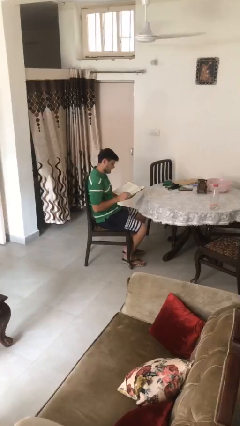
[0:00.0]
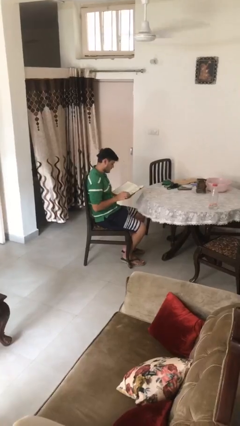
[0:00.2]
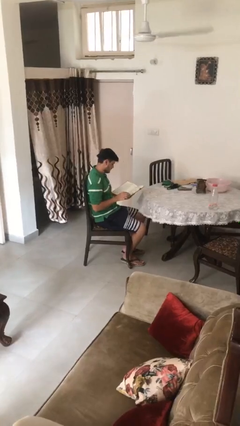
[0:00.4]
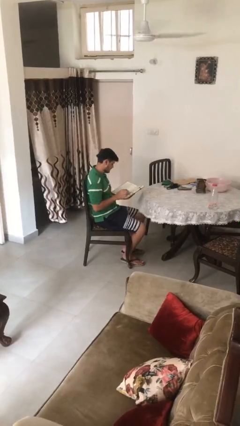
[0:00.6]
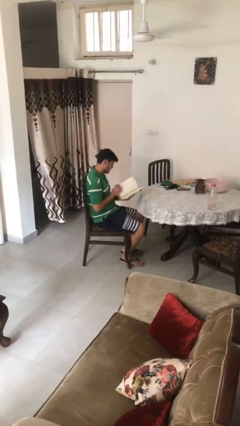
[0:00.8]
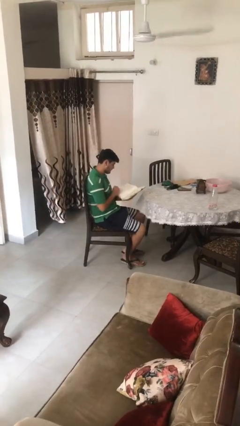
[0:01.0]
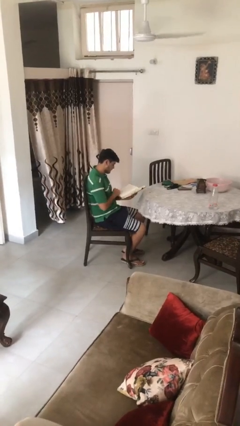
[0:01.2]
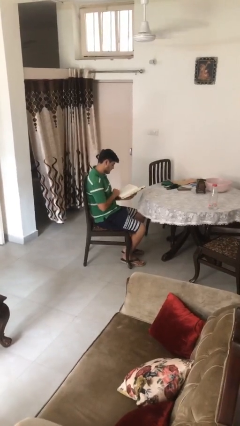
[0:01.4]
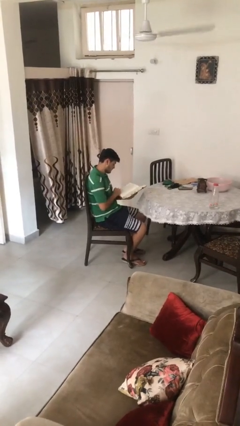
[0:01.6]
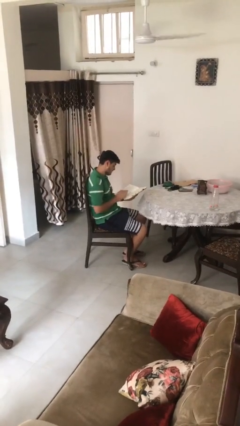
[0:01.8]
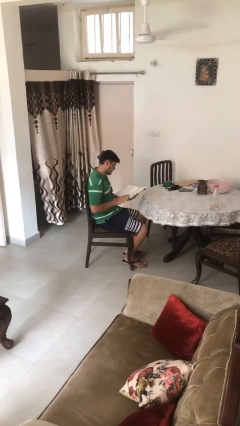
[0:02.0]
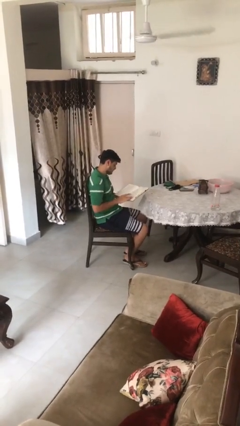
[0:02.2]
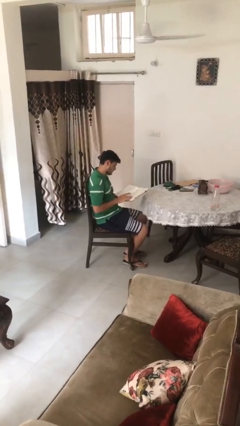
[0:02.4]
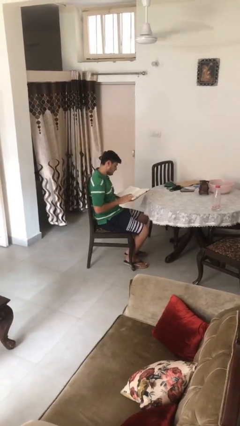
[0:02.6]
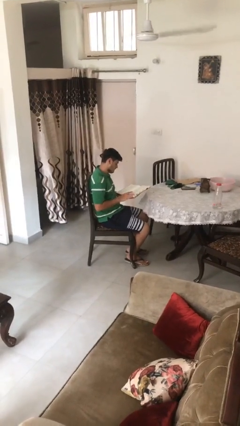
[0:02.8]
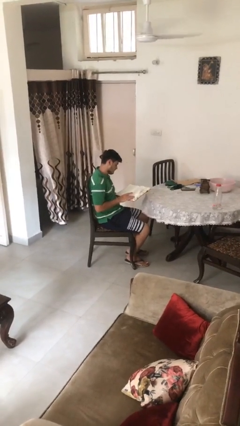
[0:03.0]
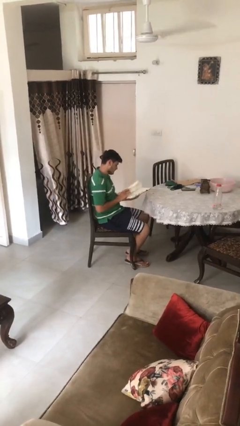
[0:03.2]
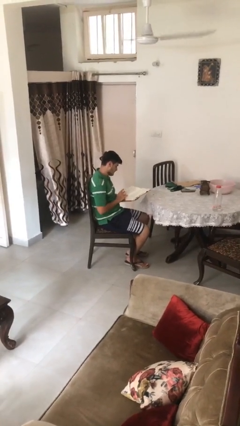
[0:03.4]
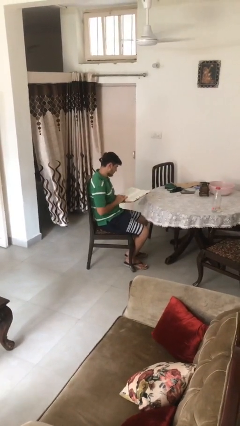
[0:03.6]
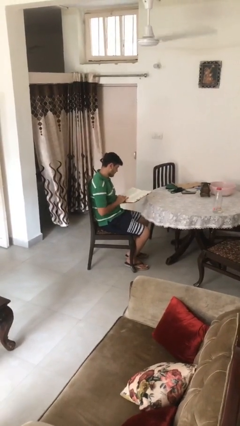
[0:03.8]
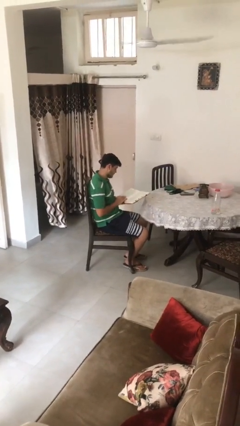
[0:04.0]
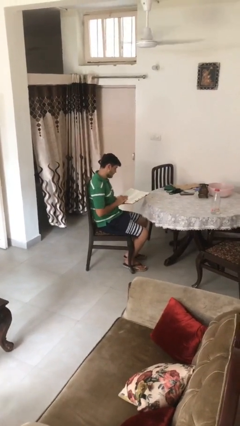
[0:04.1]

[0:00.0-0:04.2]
person reads document

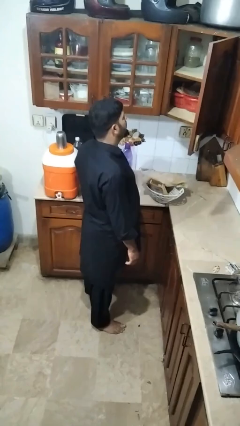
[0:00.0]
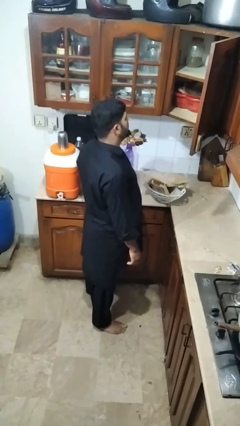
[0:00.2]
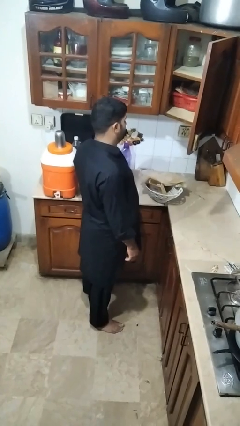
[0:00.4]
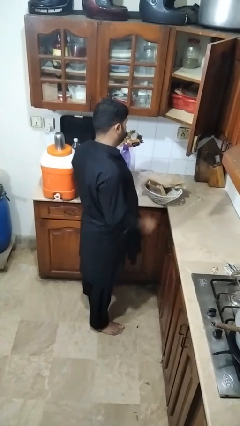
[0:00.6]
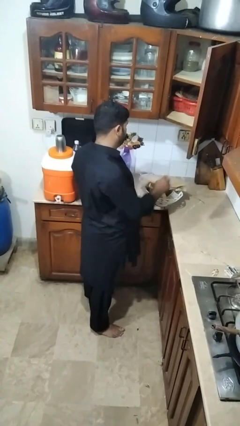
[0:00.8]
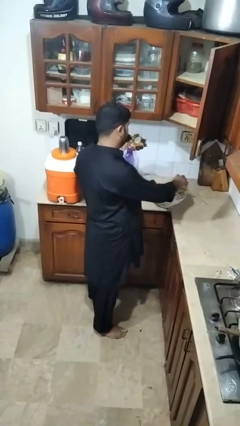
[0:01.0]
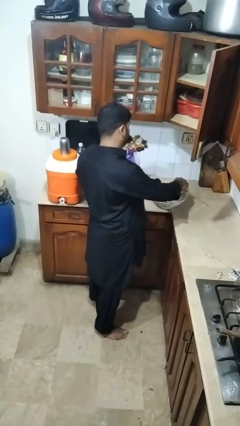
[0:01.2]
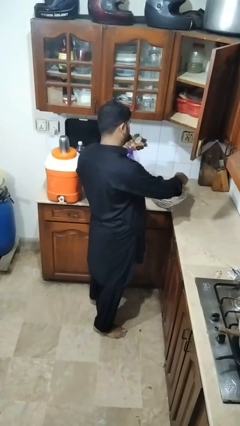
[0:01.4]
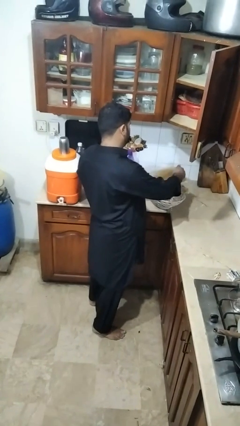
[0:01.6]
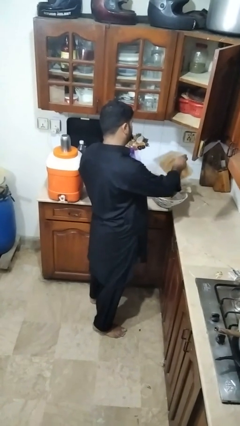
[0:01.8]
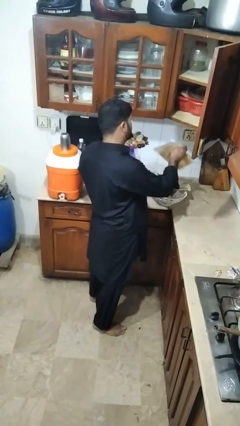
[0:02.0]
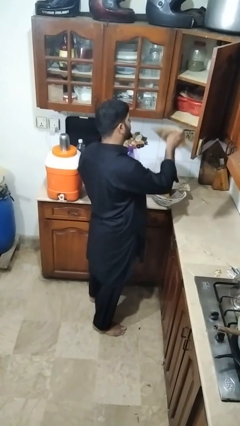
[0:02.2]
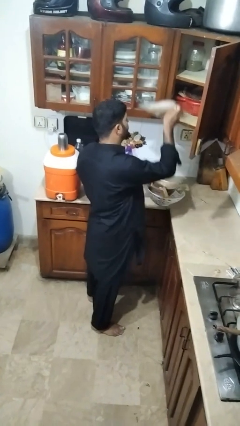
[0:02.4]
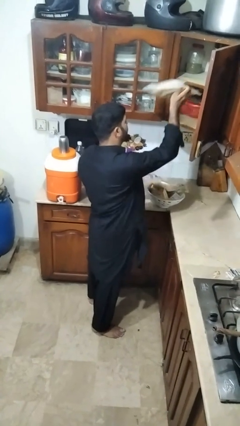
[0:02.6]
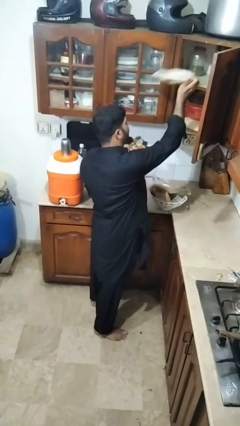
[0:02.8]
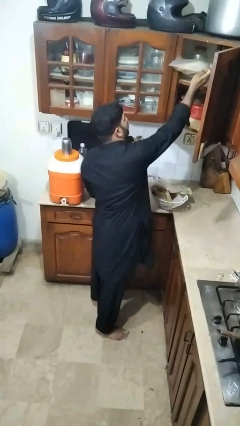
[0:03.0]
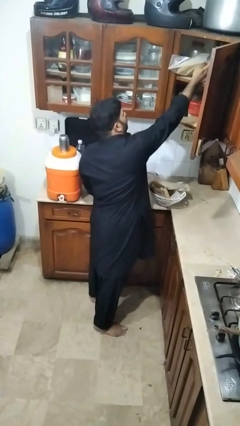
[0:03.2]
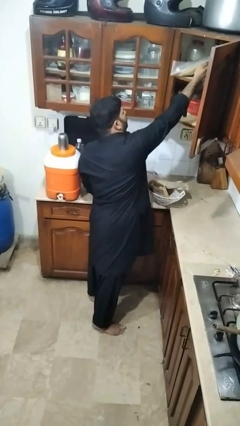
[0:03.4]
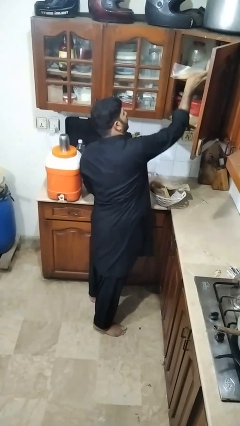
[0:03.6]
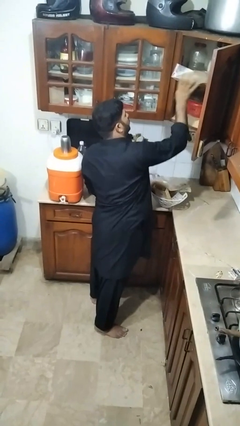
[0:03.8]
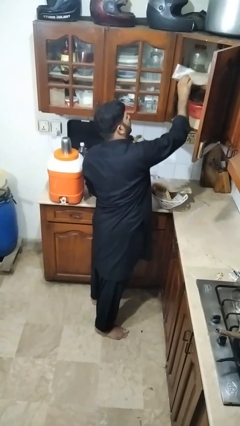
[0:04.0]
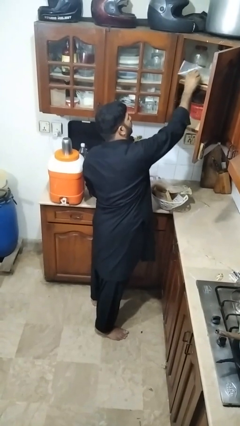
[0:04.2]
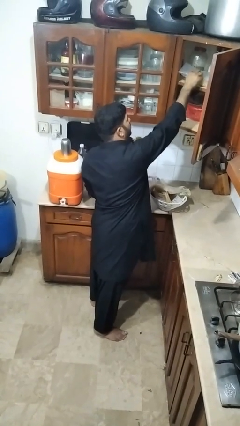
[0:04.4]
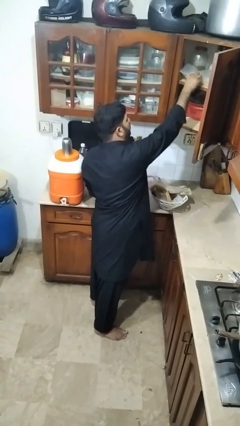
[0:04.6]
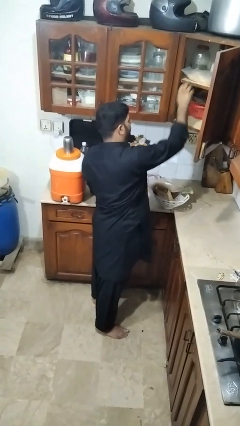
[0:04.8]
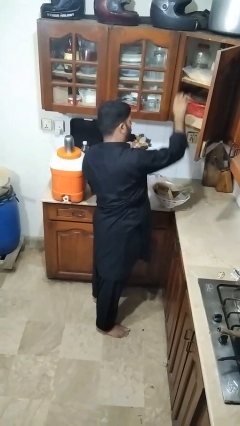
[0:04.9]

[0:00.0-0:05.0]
person loads groceries into cabinet

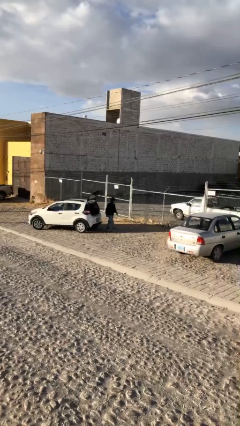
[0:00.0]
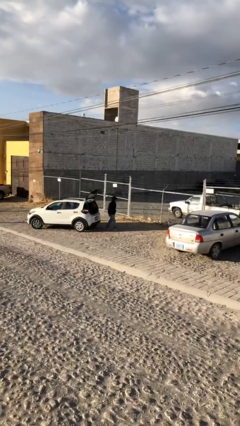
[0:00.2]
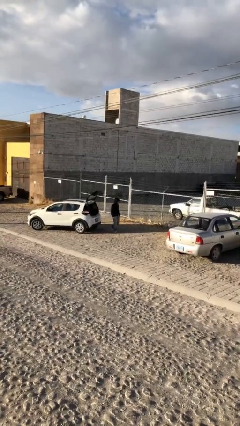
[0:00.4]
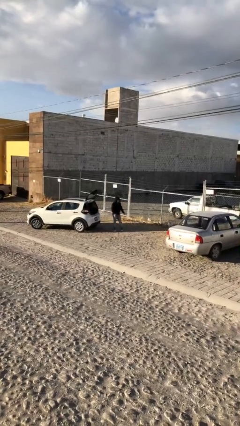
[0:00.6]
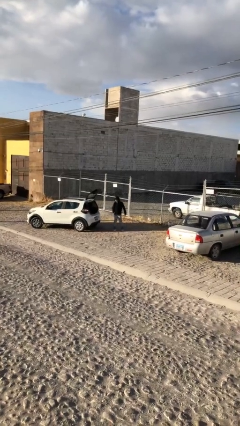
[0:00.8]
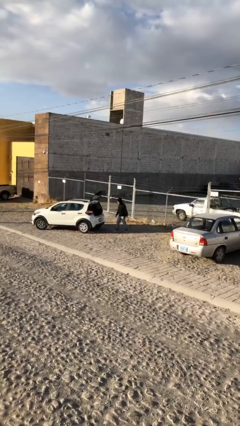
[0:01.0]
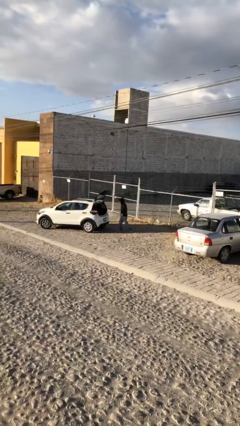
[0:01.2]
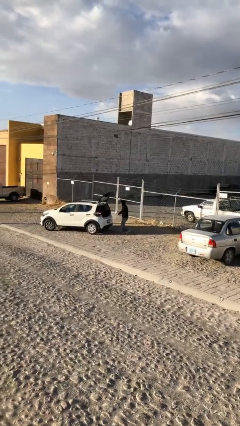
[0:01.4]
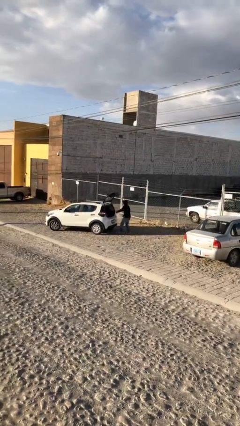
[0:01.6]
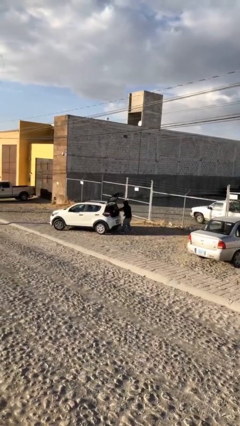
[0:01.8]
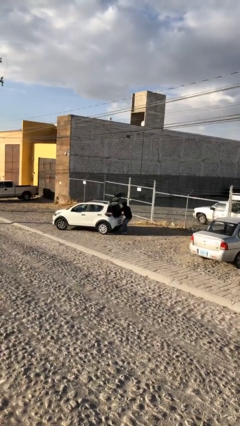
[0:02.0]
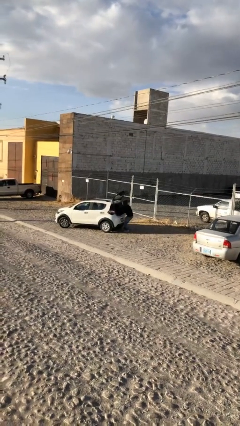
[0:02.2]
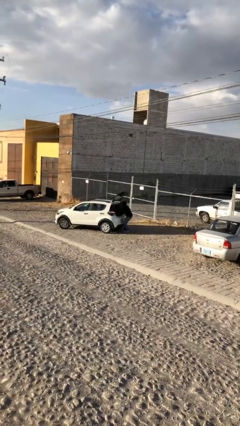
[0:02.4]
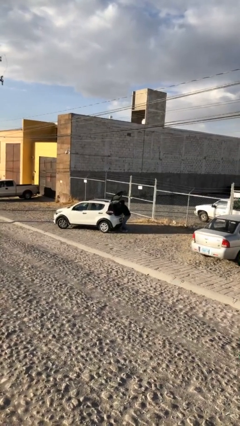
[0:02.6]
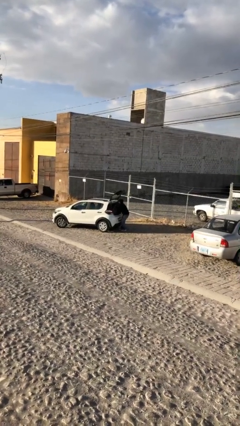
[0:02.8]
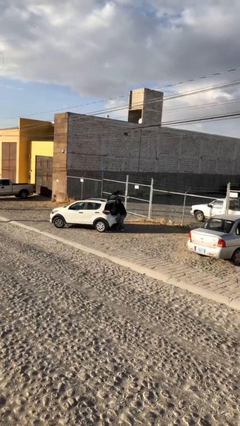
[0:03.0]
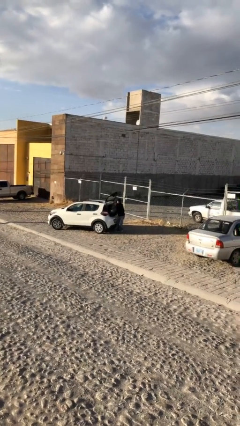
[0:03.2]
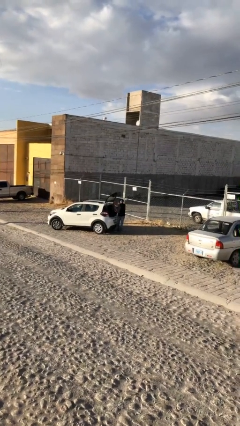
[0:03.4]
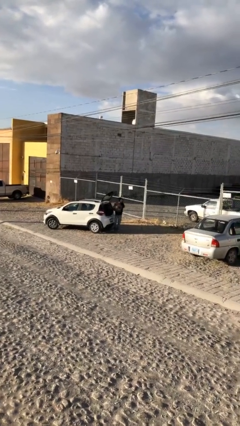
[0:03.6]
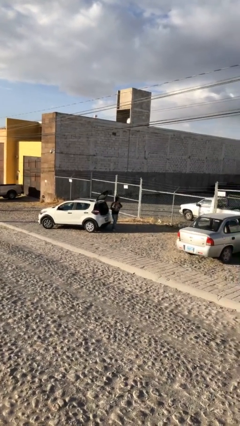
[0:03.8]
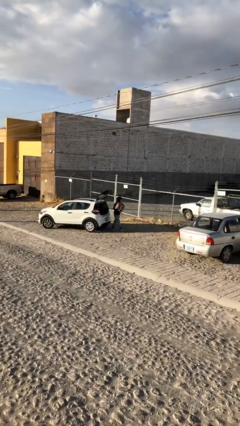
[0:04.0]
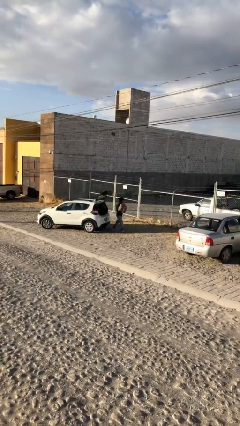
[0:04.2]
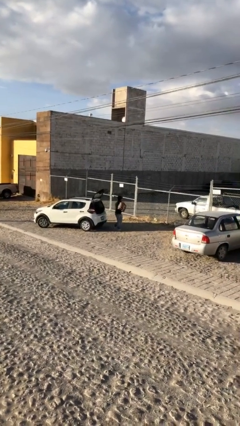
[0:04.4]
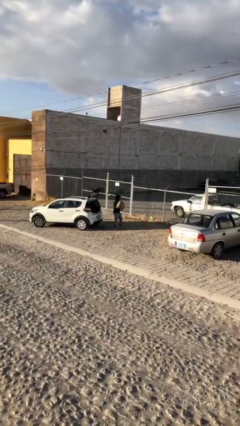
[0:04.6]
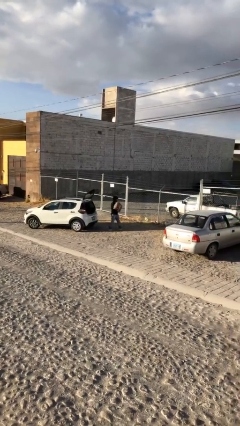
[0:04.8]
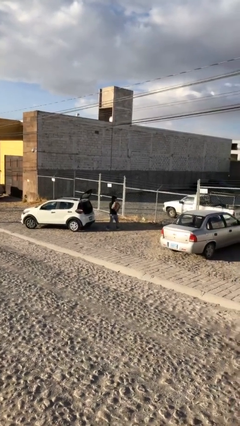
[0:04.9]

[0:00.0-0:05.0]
person unloads car

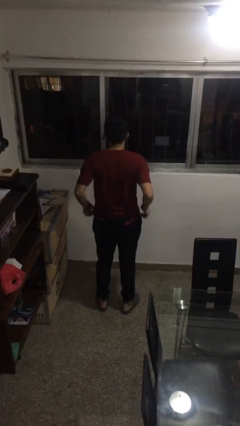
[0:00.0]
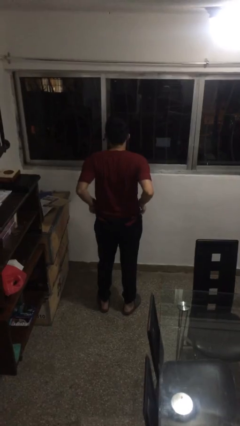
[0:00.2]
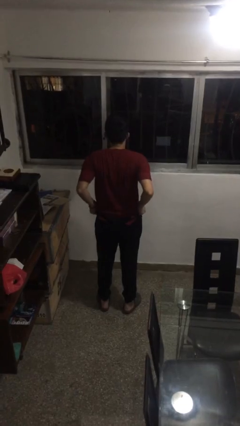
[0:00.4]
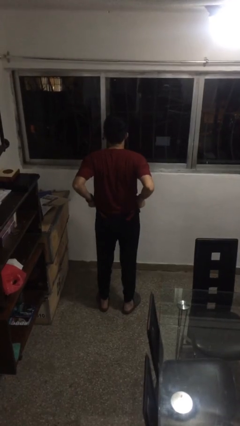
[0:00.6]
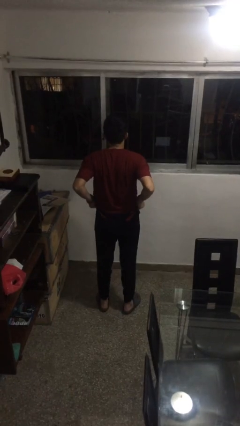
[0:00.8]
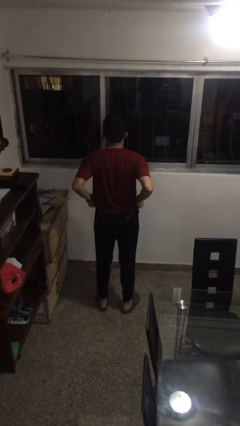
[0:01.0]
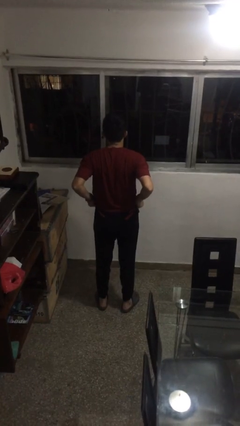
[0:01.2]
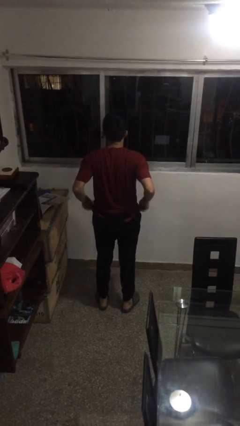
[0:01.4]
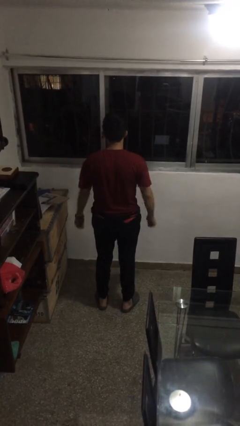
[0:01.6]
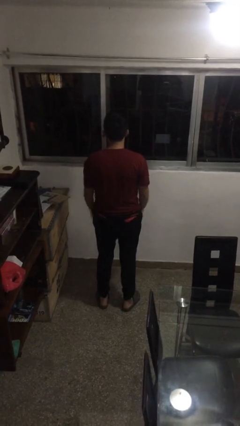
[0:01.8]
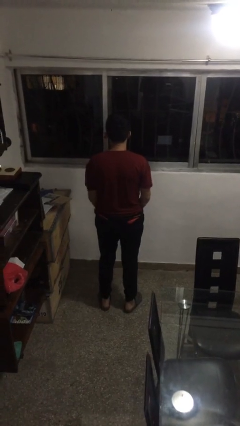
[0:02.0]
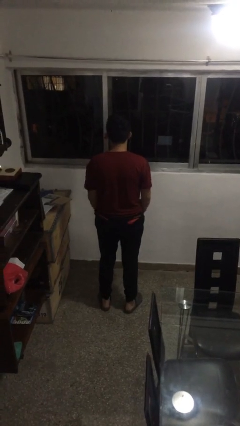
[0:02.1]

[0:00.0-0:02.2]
person hikes up pants

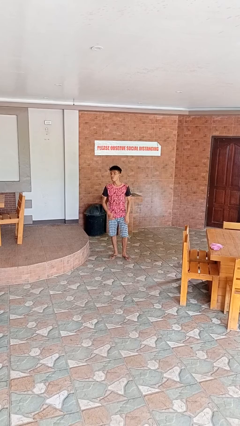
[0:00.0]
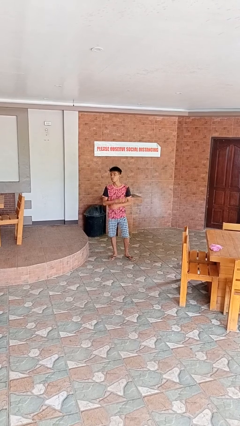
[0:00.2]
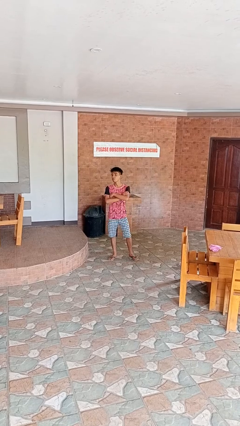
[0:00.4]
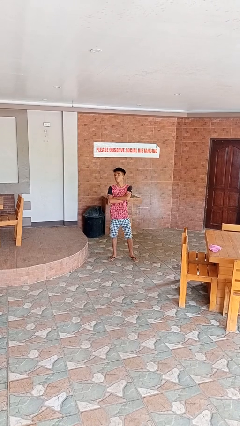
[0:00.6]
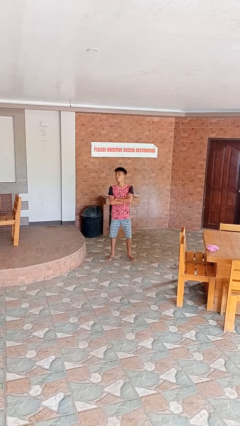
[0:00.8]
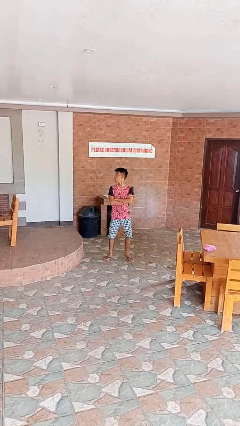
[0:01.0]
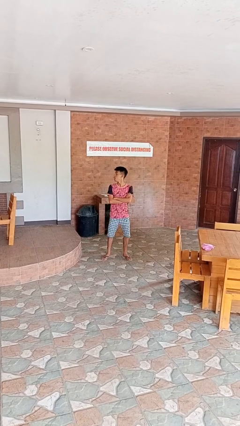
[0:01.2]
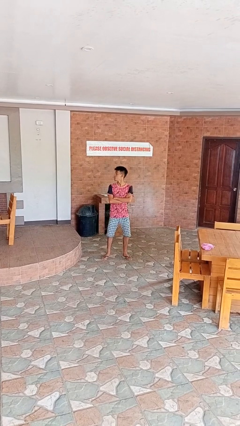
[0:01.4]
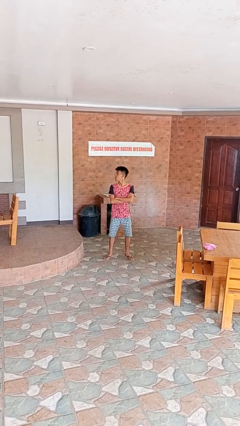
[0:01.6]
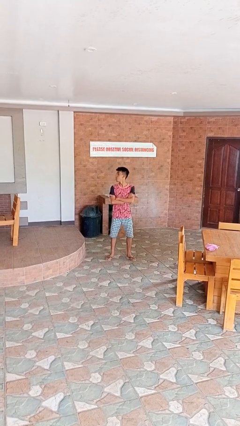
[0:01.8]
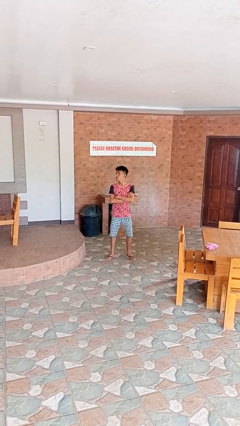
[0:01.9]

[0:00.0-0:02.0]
person crosses arms
